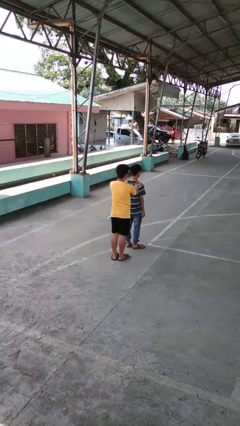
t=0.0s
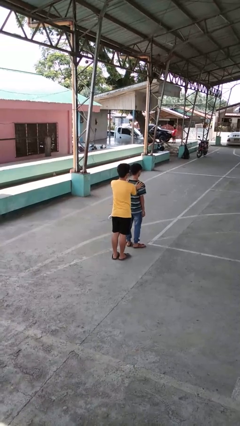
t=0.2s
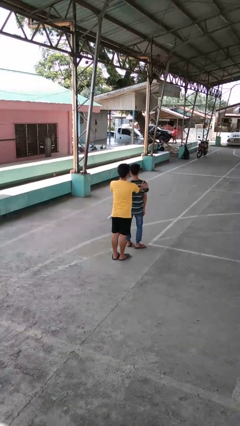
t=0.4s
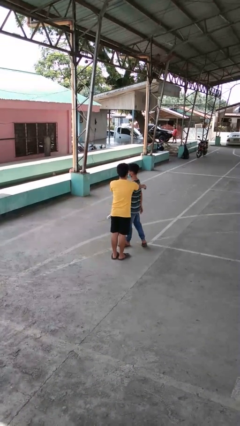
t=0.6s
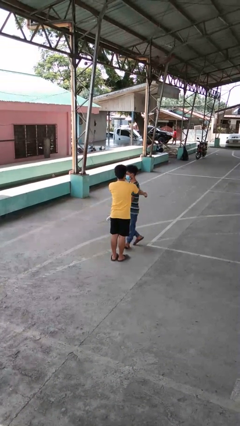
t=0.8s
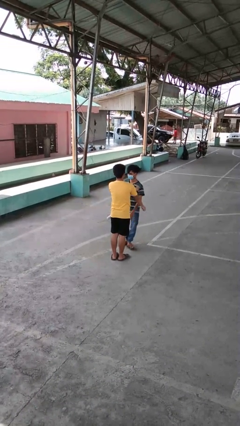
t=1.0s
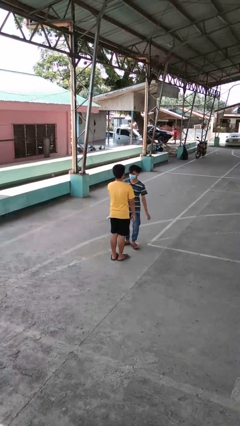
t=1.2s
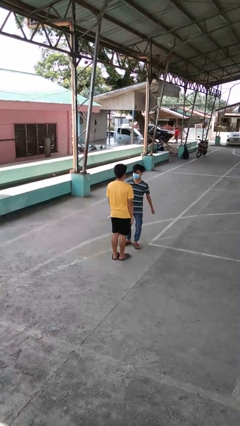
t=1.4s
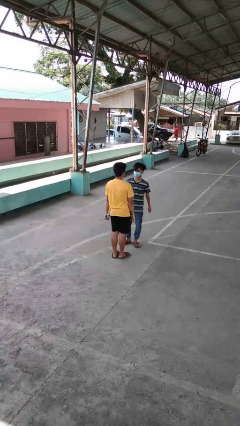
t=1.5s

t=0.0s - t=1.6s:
person spins person around

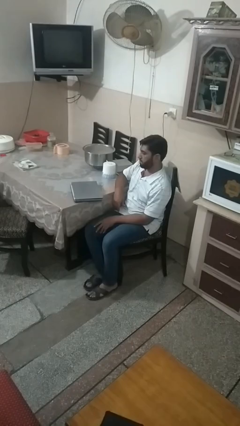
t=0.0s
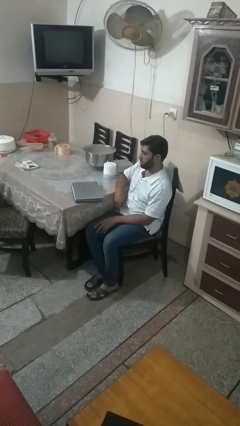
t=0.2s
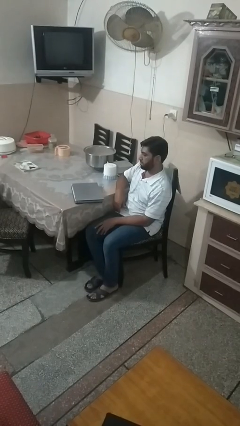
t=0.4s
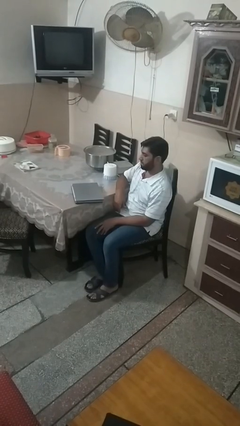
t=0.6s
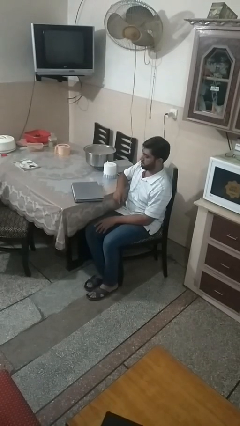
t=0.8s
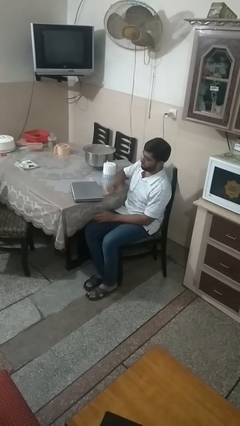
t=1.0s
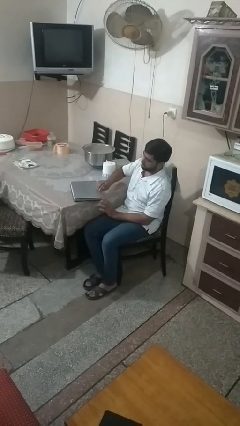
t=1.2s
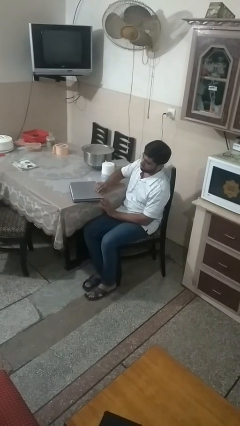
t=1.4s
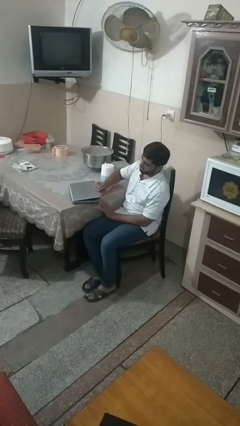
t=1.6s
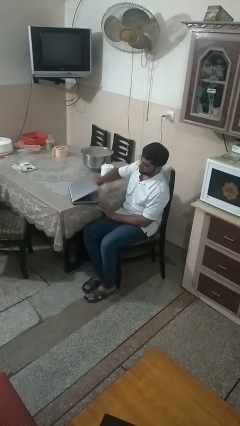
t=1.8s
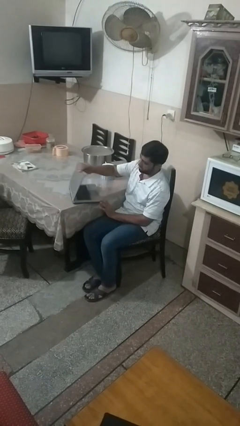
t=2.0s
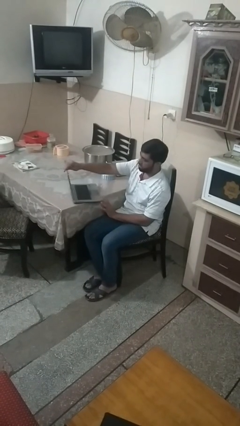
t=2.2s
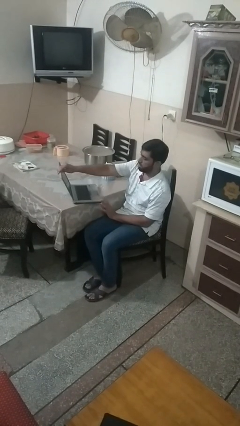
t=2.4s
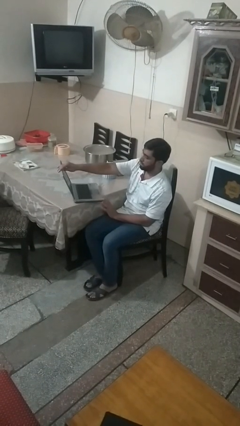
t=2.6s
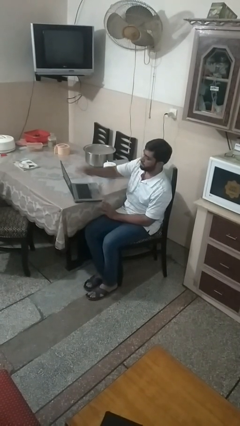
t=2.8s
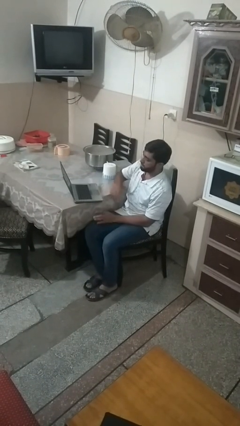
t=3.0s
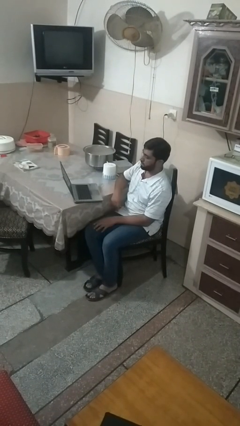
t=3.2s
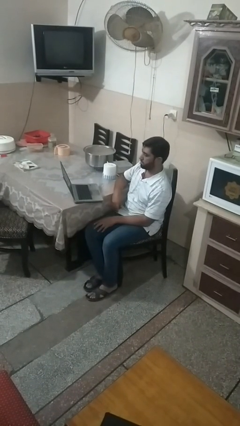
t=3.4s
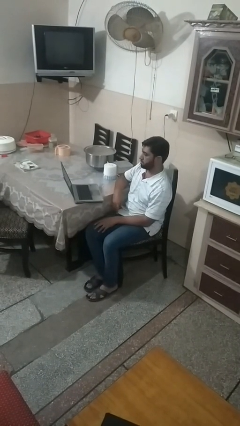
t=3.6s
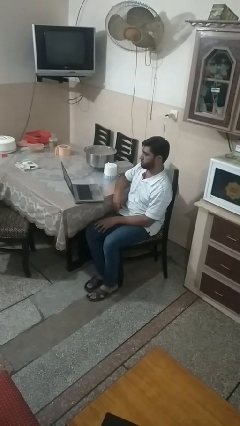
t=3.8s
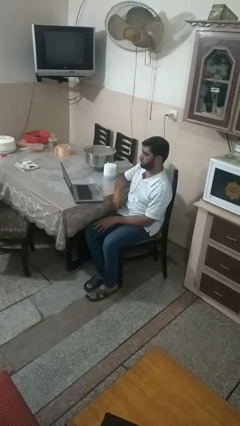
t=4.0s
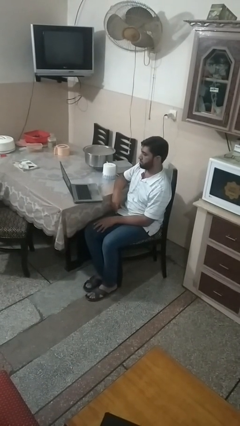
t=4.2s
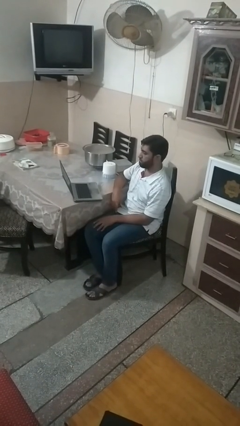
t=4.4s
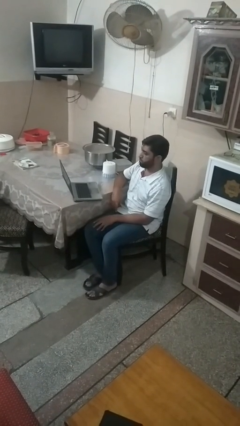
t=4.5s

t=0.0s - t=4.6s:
person opens laptop

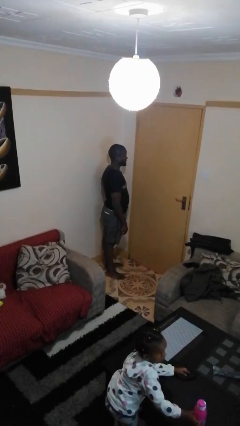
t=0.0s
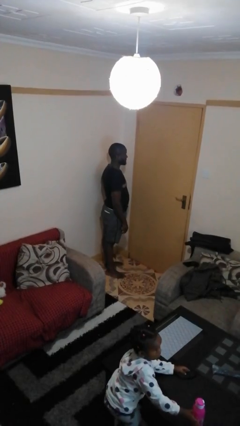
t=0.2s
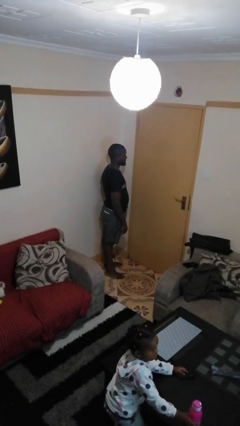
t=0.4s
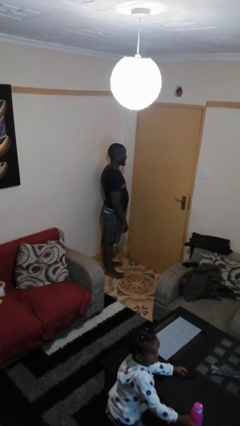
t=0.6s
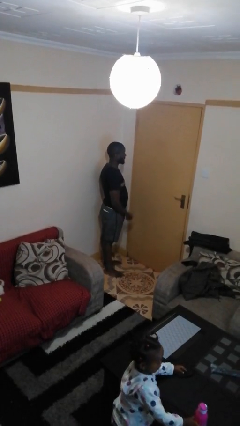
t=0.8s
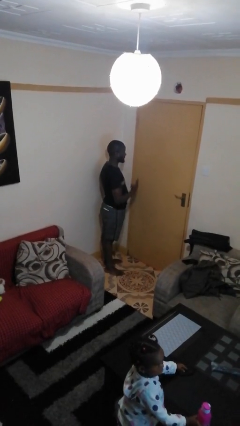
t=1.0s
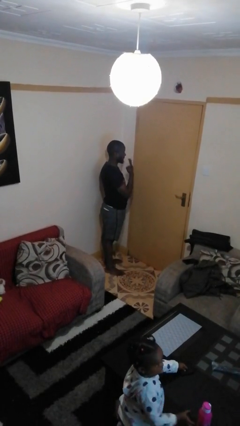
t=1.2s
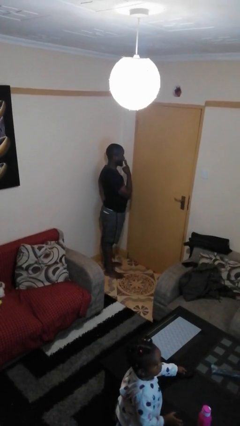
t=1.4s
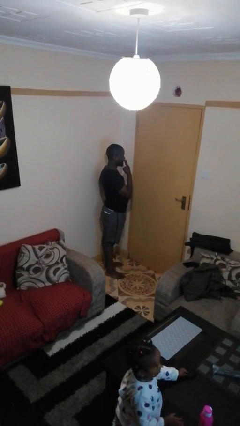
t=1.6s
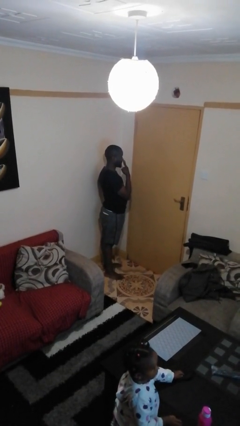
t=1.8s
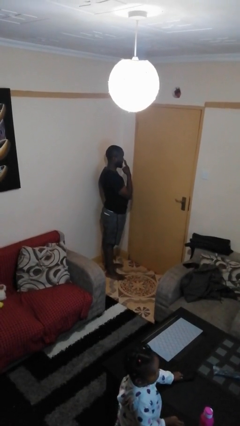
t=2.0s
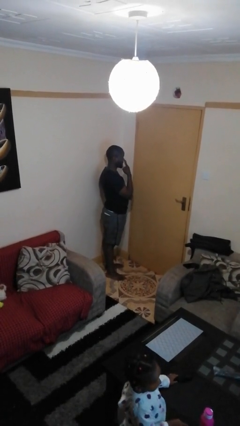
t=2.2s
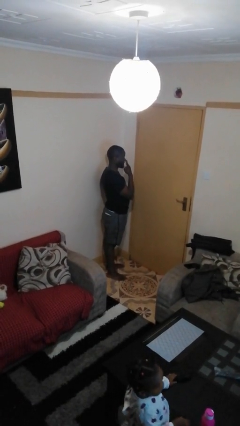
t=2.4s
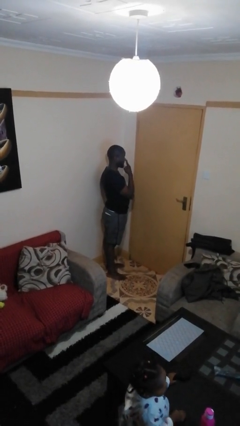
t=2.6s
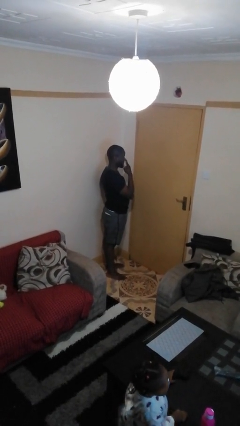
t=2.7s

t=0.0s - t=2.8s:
person gestures watch closely

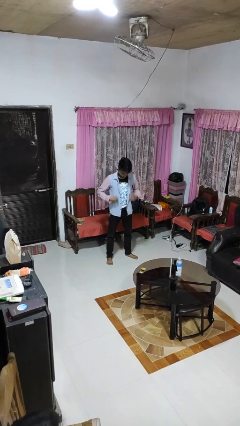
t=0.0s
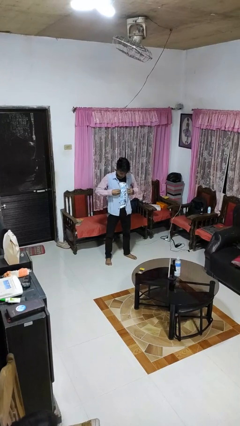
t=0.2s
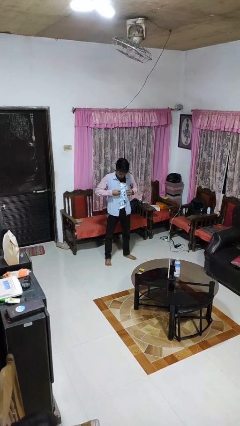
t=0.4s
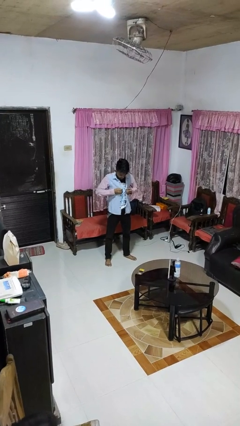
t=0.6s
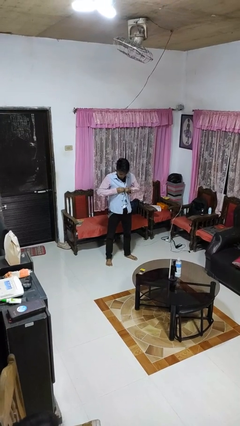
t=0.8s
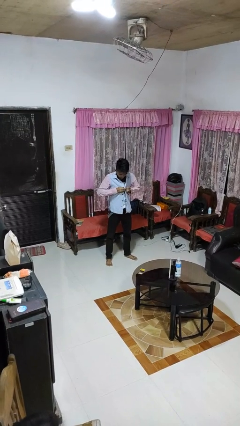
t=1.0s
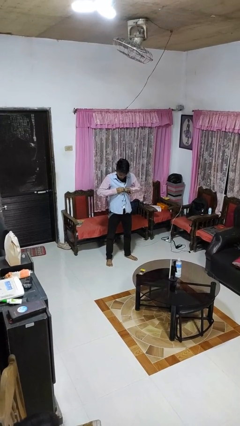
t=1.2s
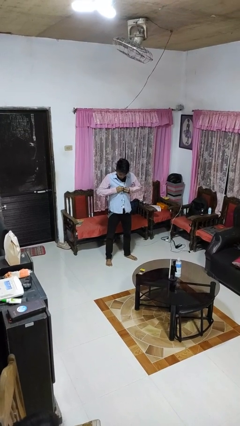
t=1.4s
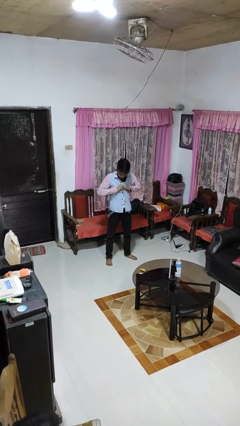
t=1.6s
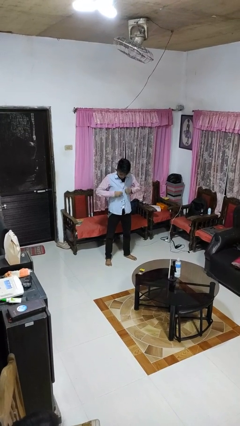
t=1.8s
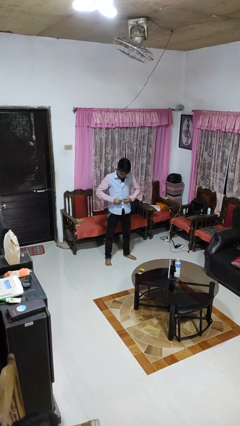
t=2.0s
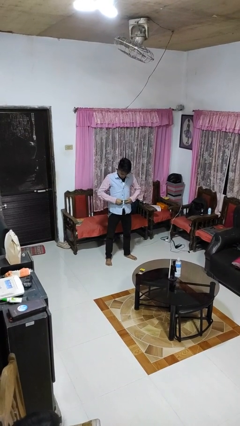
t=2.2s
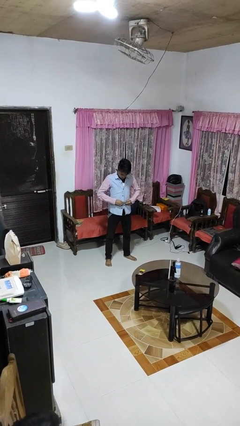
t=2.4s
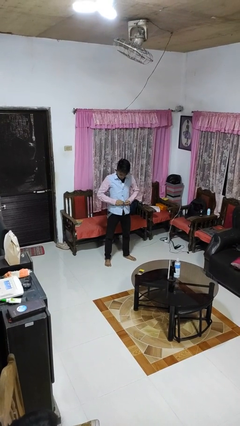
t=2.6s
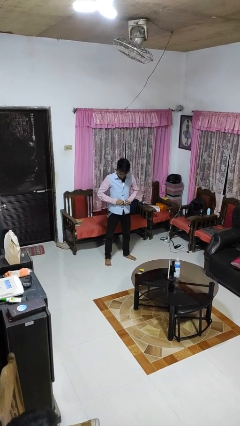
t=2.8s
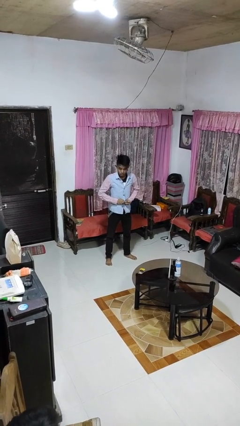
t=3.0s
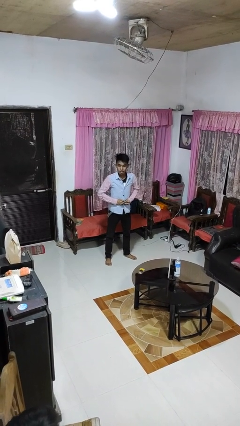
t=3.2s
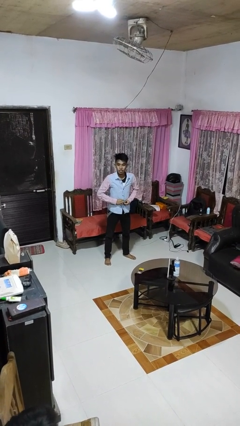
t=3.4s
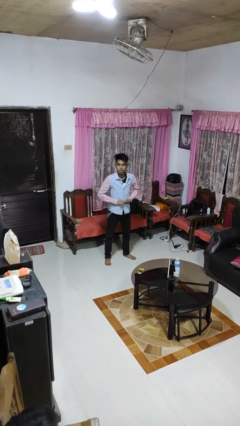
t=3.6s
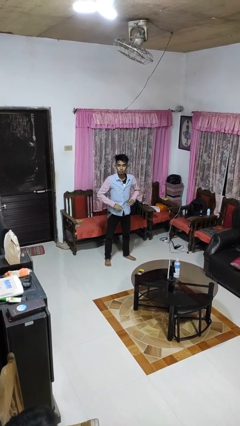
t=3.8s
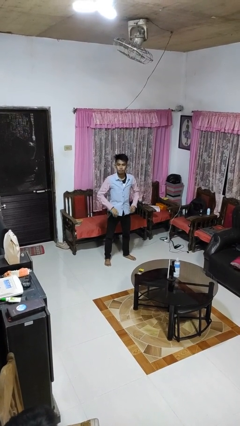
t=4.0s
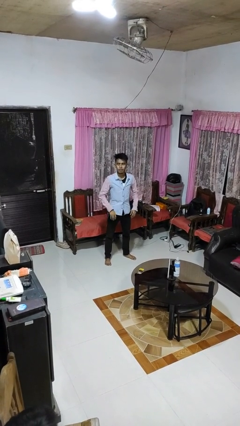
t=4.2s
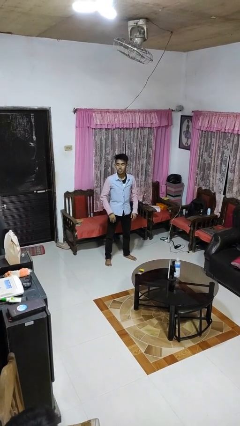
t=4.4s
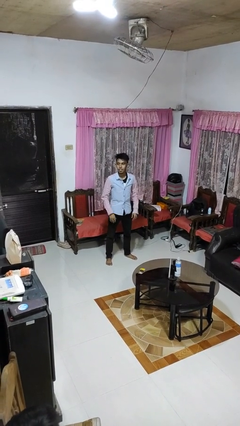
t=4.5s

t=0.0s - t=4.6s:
person buttons shirt

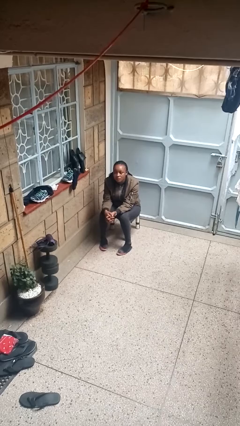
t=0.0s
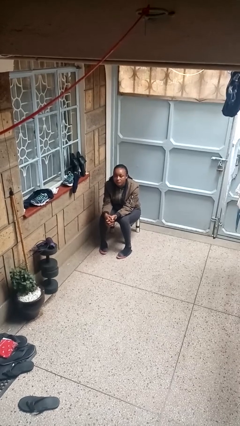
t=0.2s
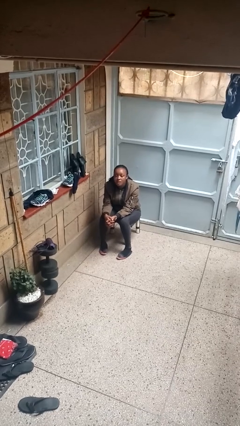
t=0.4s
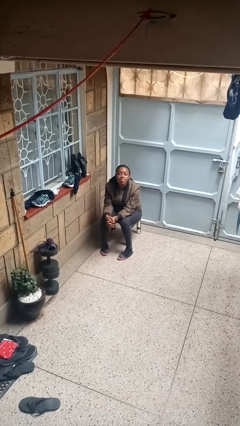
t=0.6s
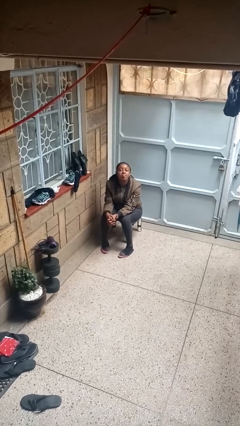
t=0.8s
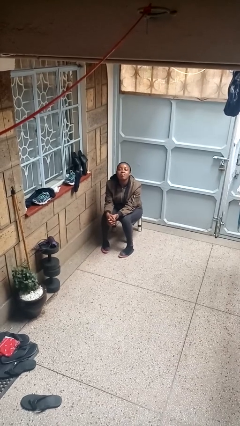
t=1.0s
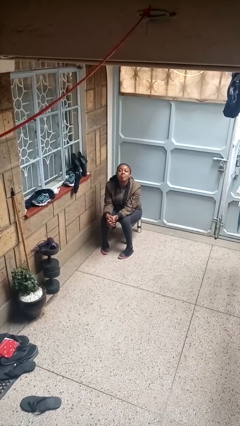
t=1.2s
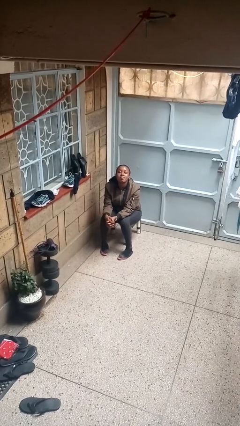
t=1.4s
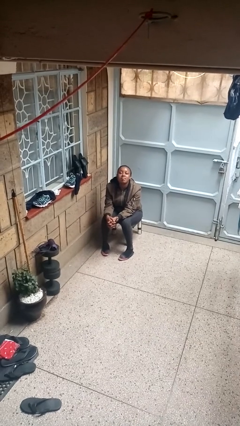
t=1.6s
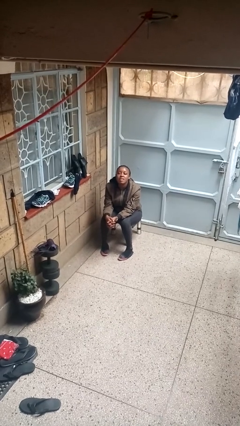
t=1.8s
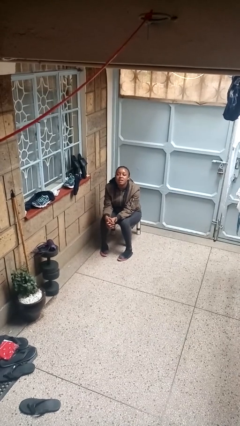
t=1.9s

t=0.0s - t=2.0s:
person sticks out tongue

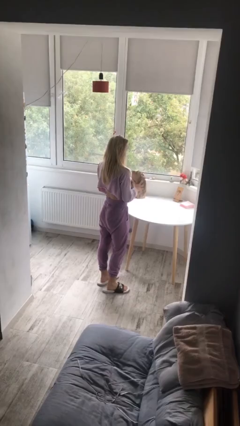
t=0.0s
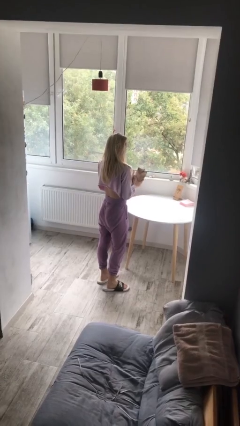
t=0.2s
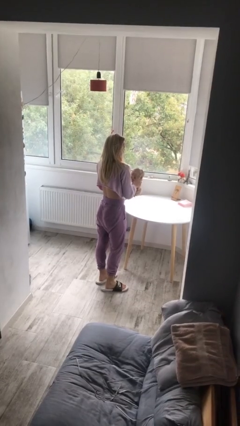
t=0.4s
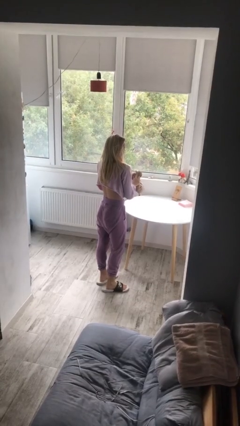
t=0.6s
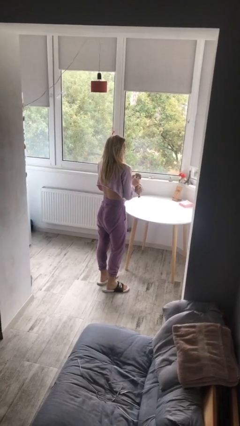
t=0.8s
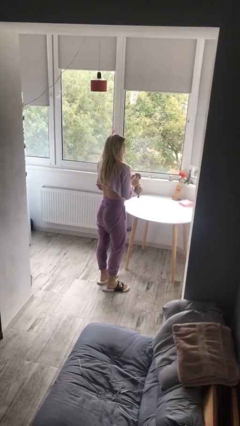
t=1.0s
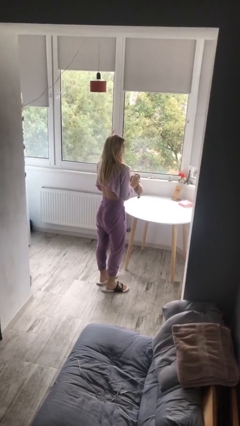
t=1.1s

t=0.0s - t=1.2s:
person crumples paper

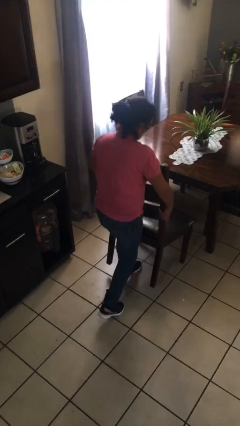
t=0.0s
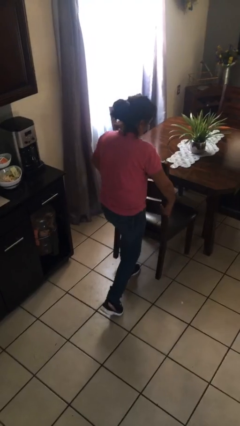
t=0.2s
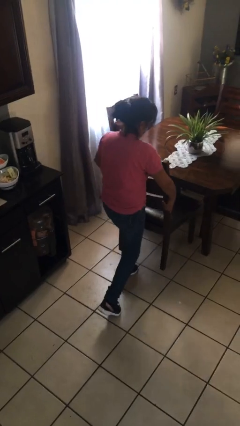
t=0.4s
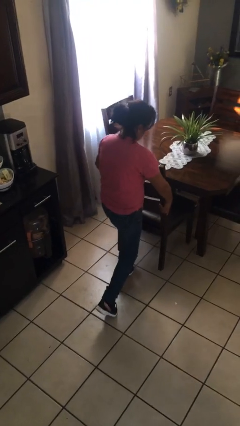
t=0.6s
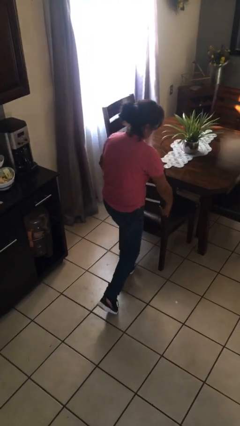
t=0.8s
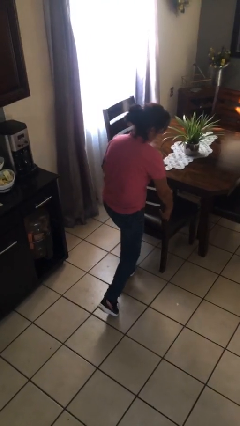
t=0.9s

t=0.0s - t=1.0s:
person pushes in chair
